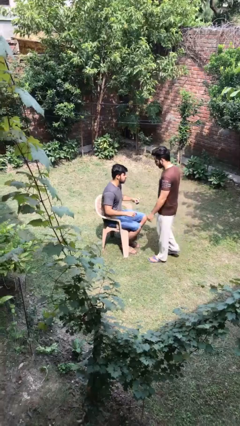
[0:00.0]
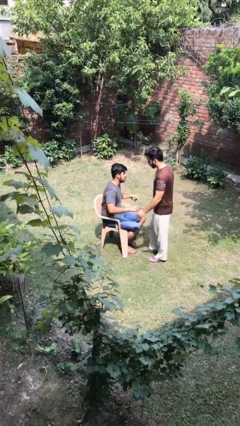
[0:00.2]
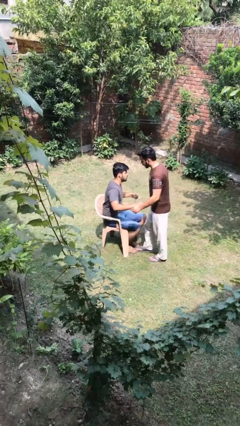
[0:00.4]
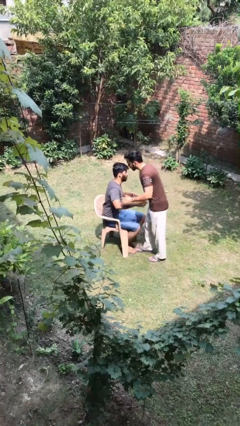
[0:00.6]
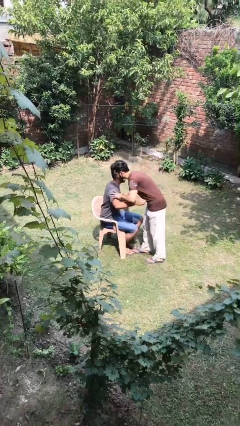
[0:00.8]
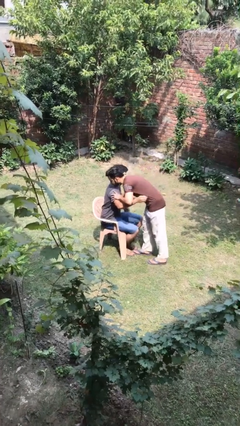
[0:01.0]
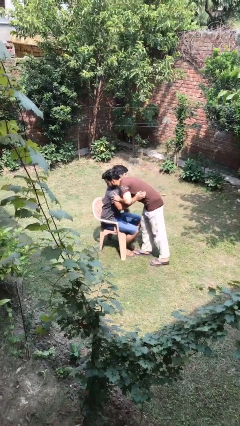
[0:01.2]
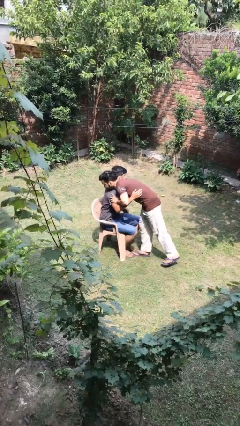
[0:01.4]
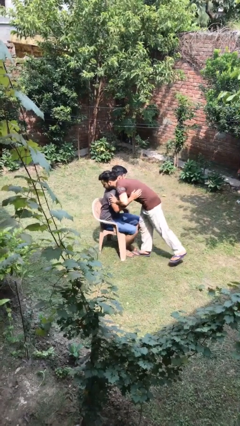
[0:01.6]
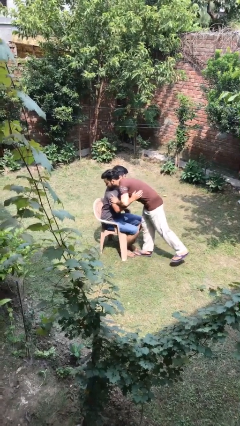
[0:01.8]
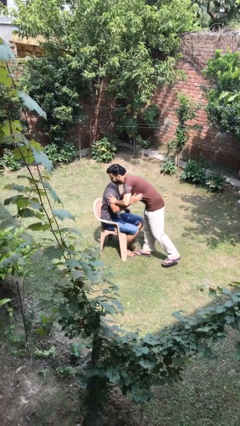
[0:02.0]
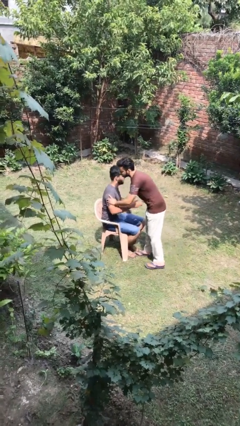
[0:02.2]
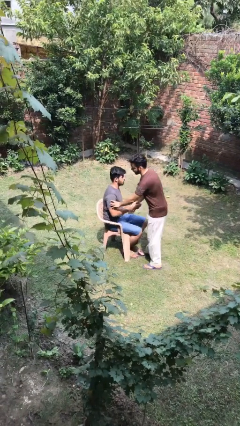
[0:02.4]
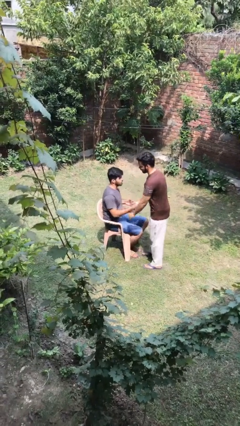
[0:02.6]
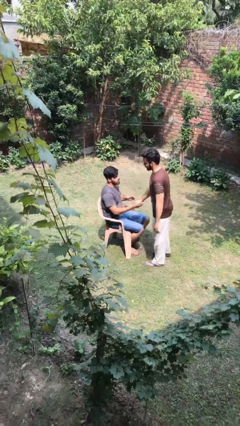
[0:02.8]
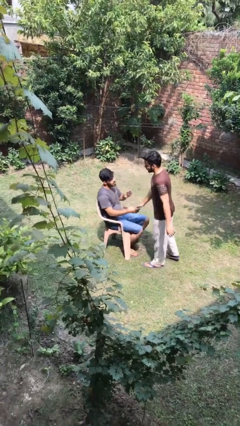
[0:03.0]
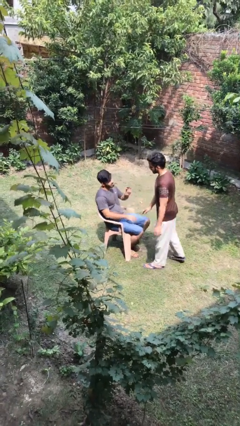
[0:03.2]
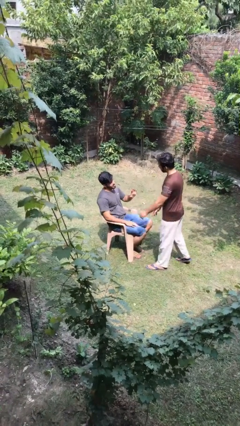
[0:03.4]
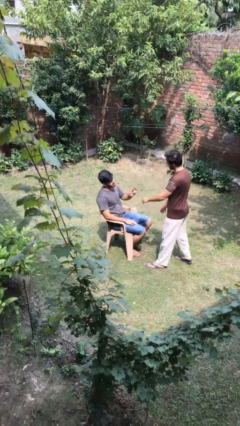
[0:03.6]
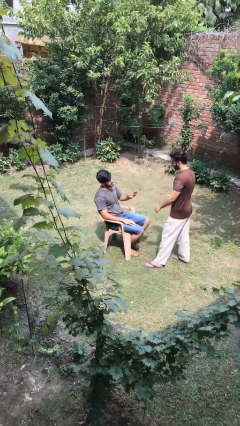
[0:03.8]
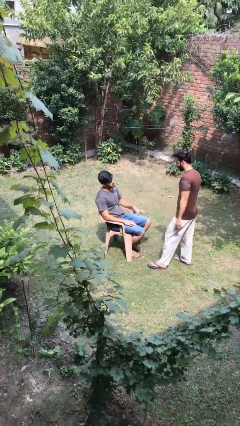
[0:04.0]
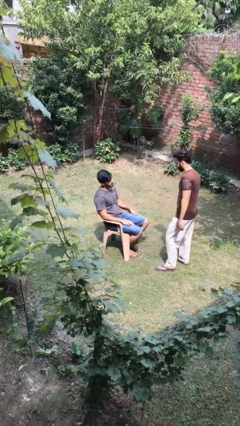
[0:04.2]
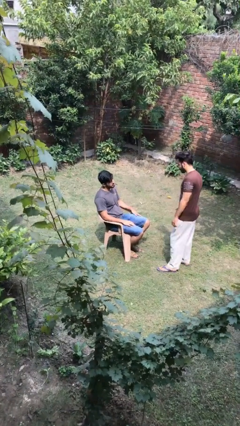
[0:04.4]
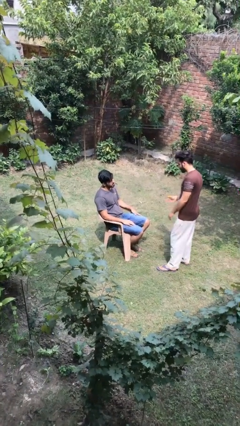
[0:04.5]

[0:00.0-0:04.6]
person embraces person

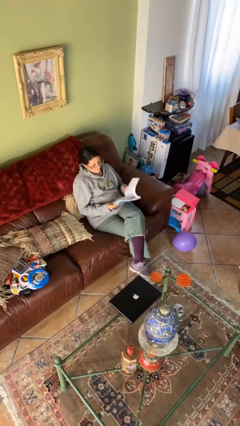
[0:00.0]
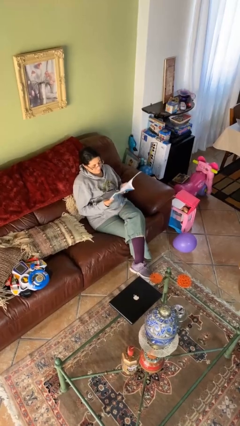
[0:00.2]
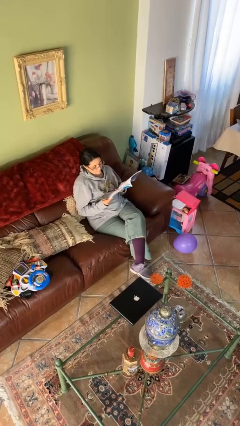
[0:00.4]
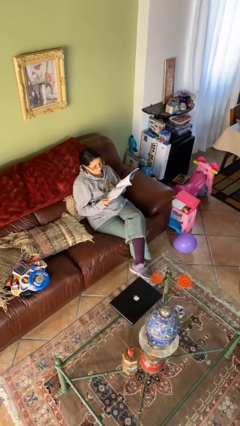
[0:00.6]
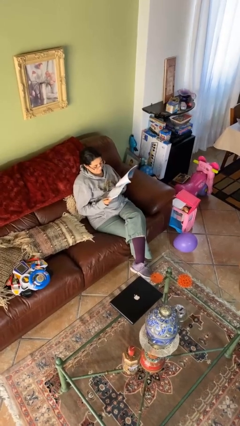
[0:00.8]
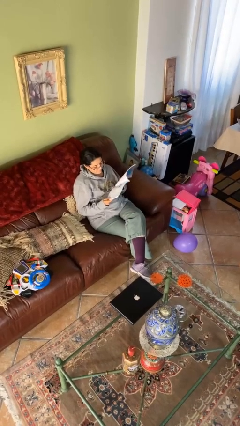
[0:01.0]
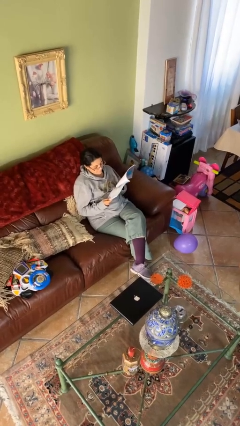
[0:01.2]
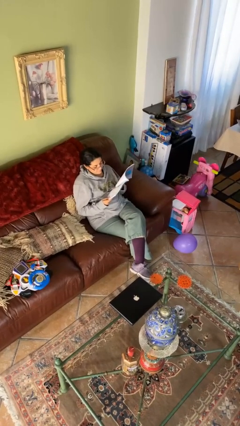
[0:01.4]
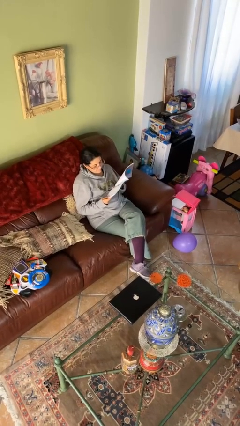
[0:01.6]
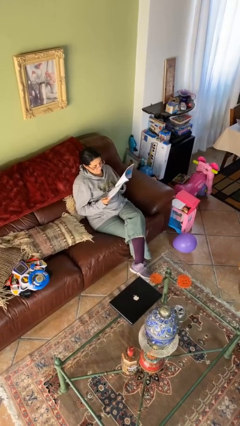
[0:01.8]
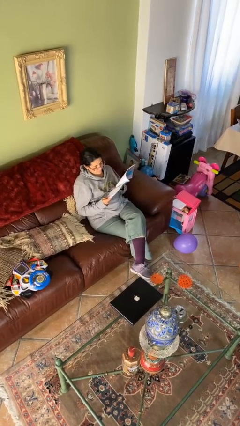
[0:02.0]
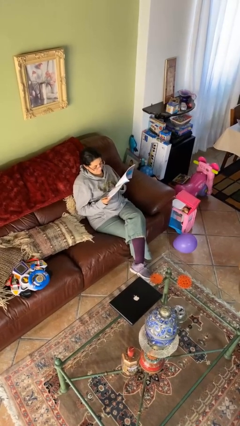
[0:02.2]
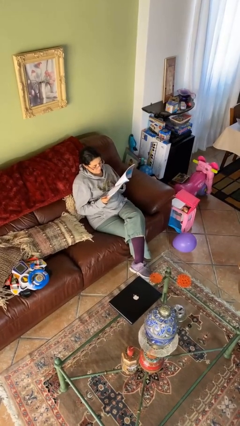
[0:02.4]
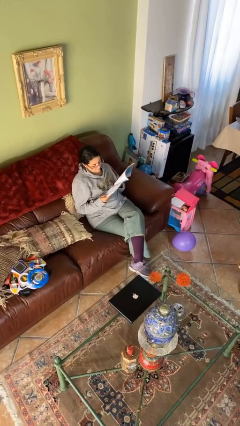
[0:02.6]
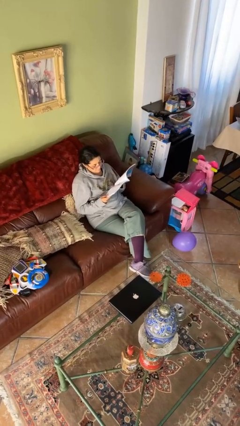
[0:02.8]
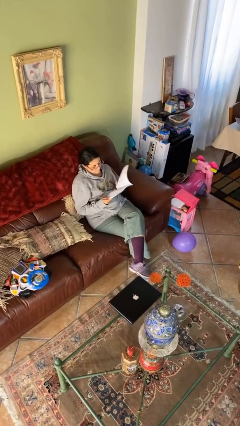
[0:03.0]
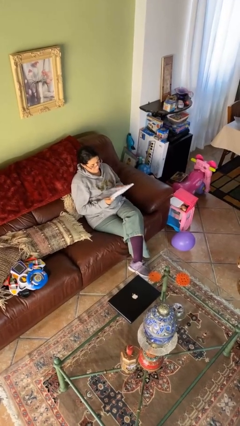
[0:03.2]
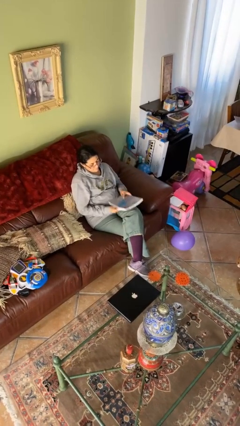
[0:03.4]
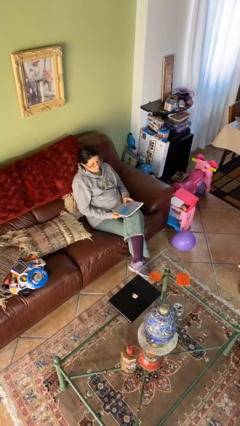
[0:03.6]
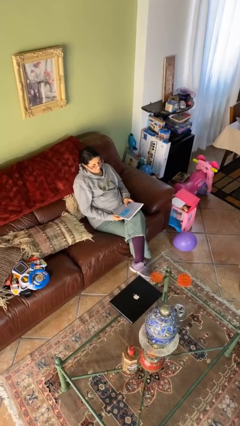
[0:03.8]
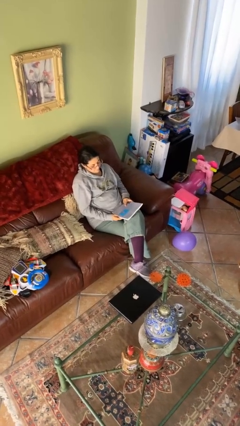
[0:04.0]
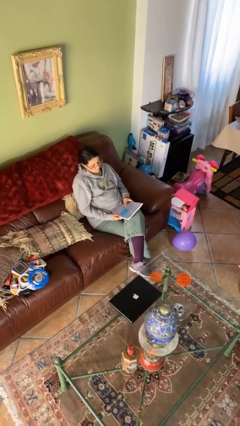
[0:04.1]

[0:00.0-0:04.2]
person reads document

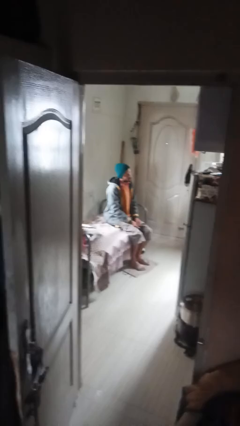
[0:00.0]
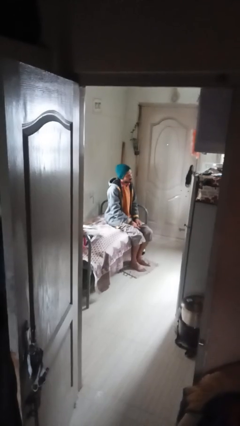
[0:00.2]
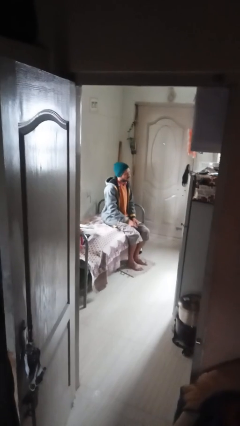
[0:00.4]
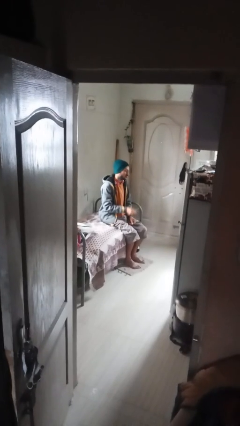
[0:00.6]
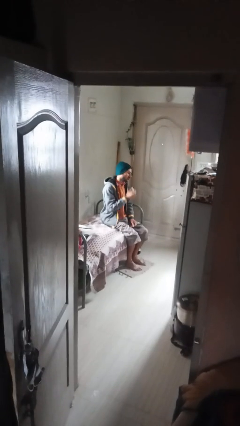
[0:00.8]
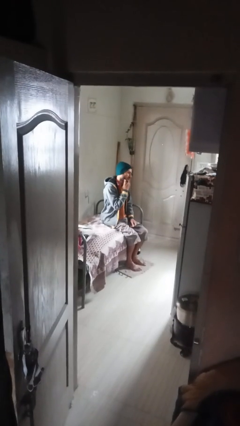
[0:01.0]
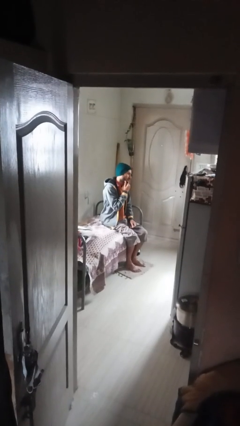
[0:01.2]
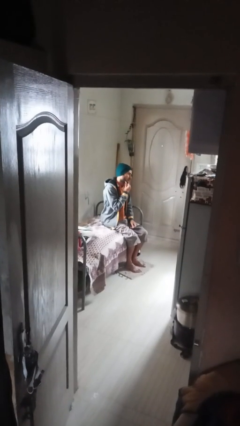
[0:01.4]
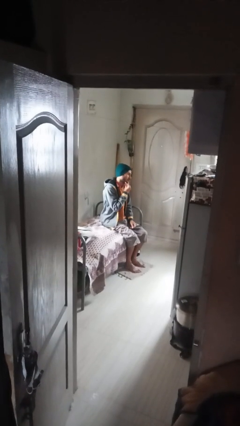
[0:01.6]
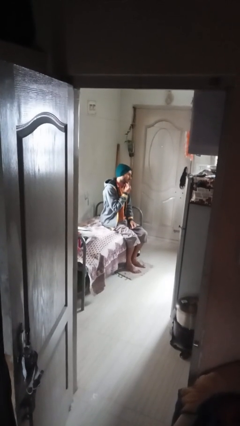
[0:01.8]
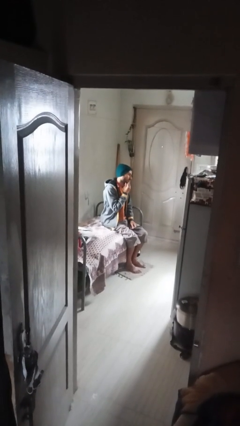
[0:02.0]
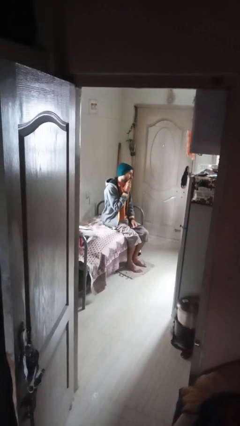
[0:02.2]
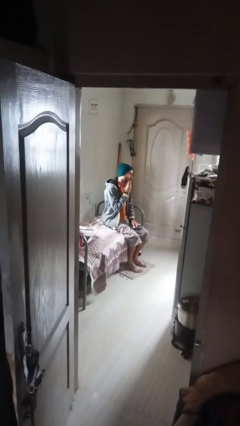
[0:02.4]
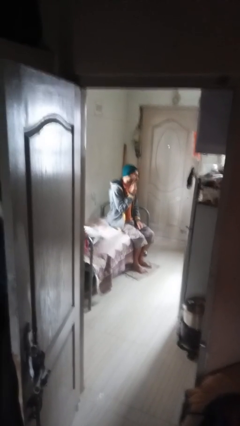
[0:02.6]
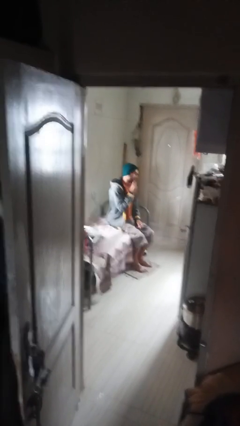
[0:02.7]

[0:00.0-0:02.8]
person strokes chin

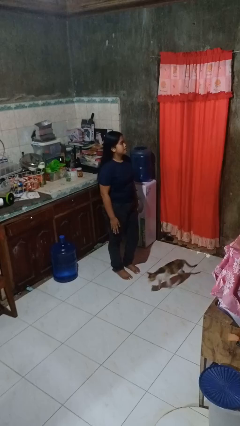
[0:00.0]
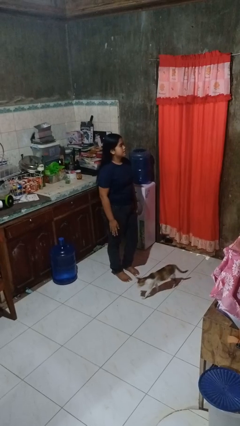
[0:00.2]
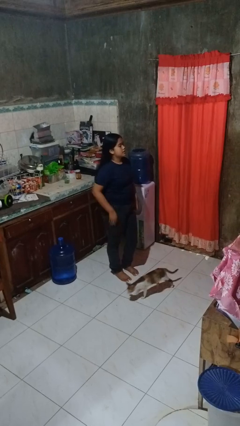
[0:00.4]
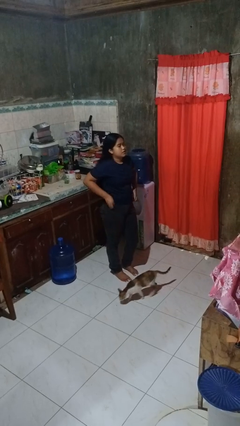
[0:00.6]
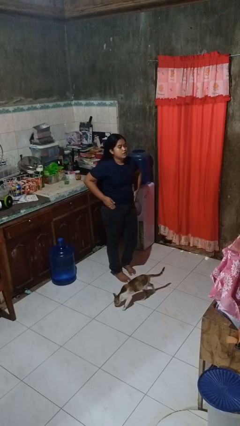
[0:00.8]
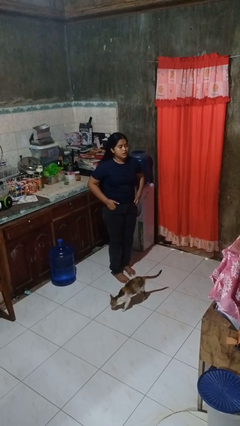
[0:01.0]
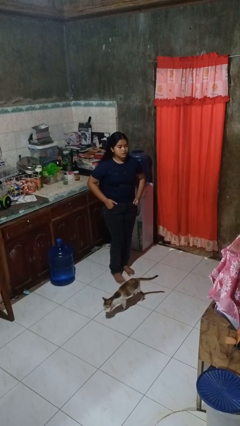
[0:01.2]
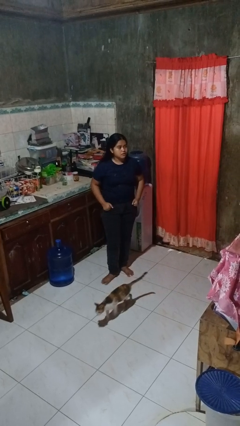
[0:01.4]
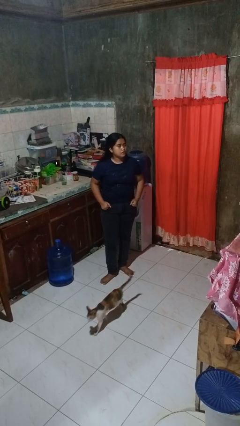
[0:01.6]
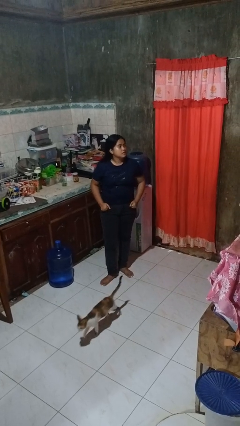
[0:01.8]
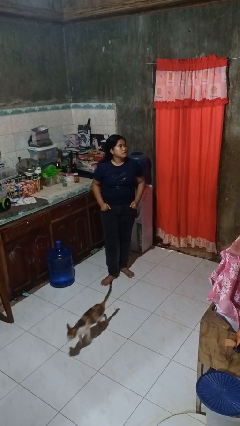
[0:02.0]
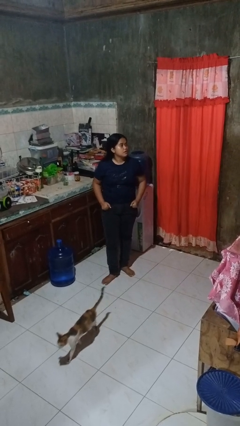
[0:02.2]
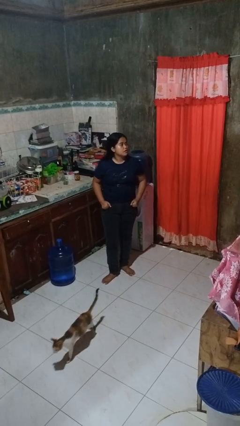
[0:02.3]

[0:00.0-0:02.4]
person puts hands in back pockets

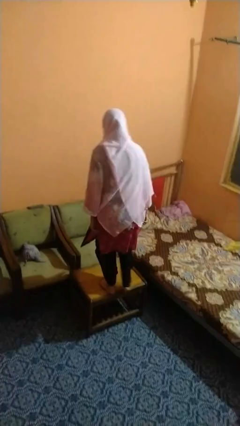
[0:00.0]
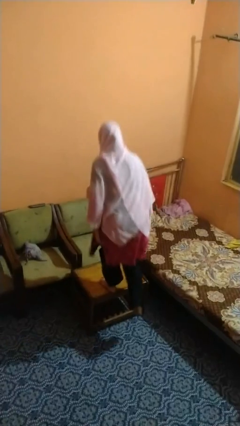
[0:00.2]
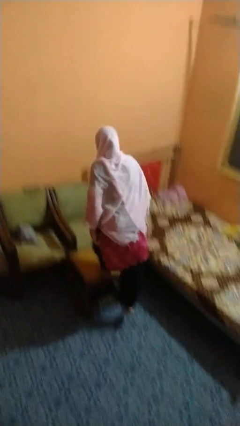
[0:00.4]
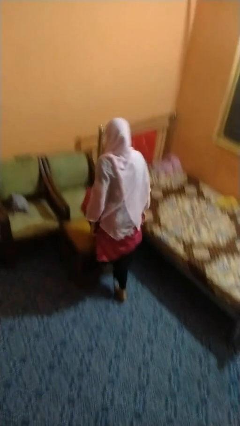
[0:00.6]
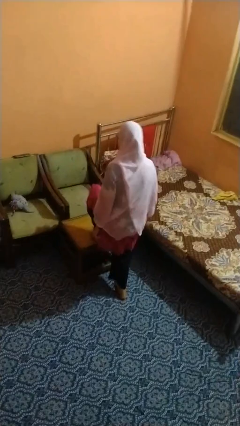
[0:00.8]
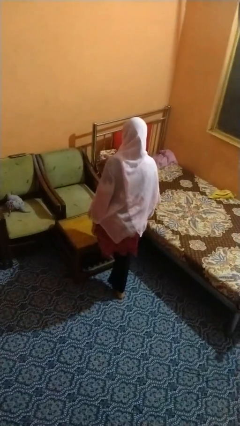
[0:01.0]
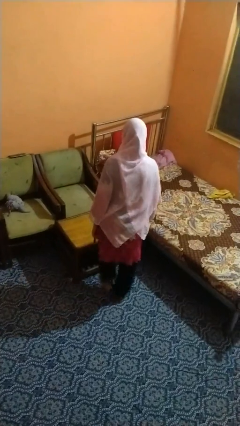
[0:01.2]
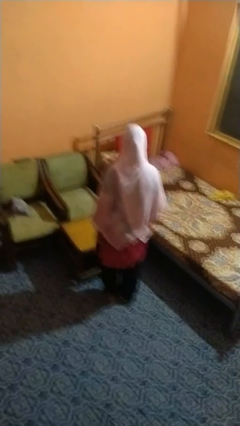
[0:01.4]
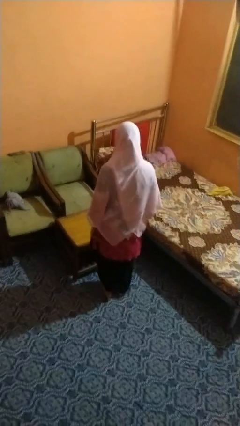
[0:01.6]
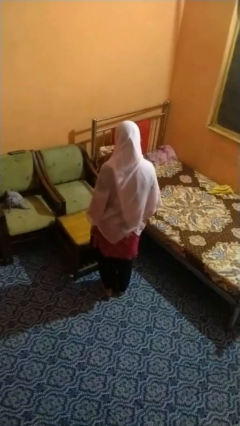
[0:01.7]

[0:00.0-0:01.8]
person climbs off table

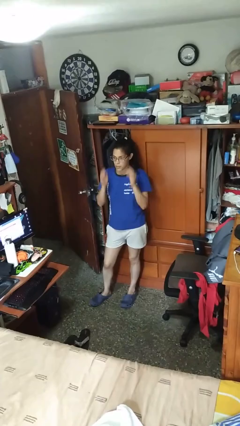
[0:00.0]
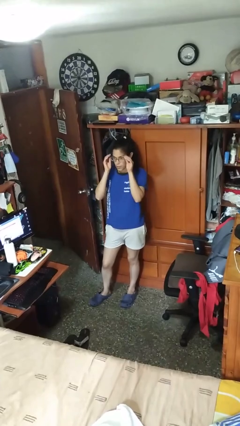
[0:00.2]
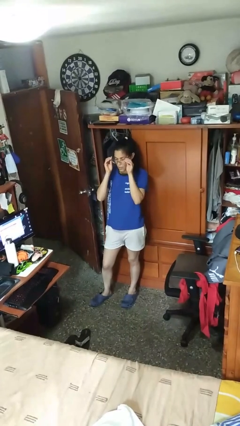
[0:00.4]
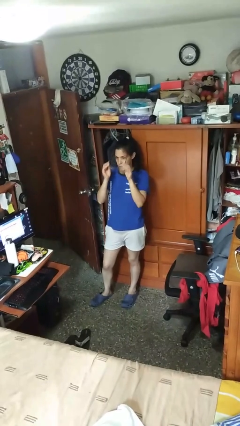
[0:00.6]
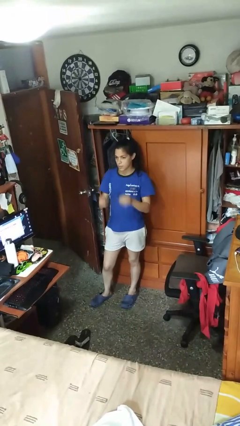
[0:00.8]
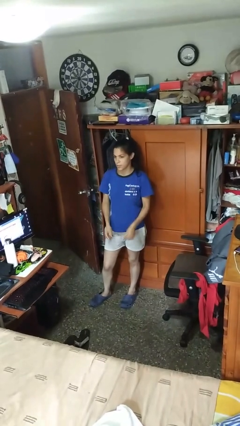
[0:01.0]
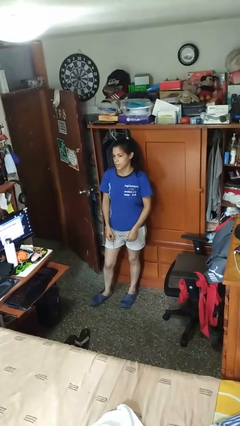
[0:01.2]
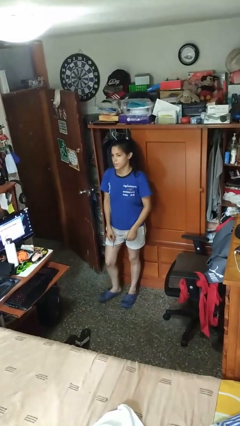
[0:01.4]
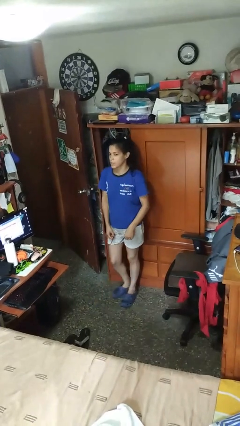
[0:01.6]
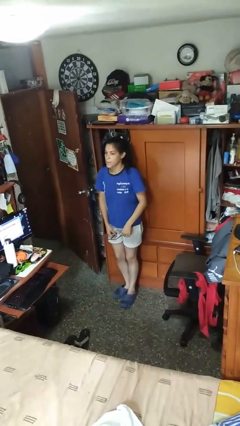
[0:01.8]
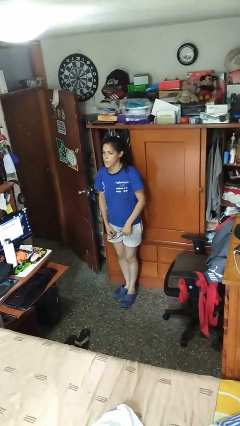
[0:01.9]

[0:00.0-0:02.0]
person takes off glasses
